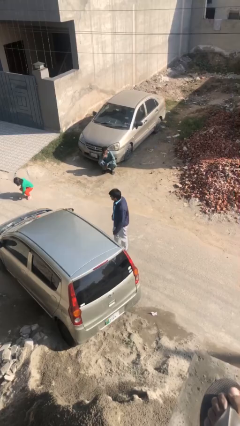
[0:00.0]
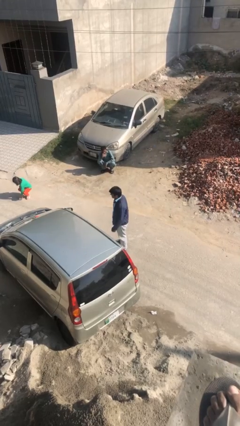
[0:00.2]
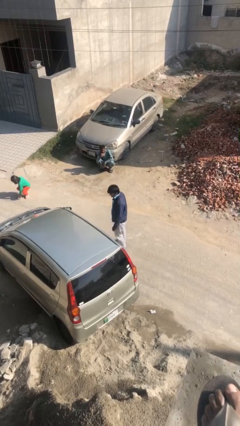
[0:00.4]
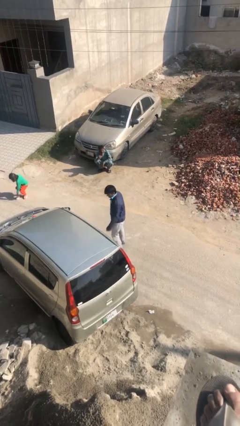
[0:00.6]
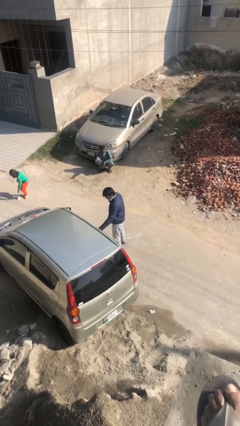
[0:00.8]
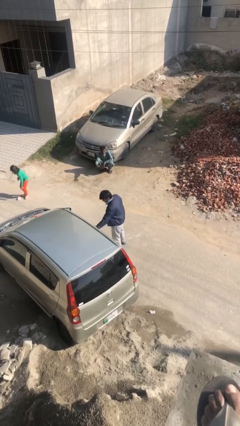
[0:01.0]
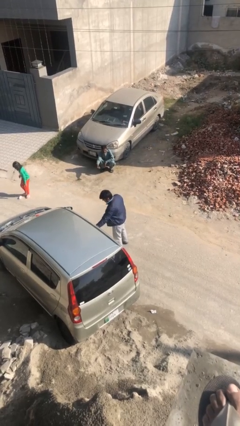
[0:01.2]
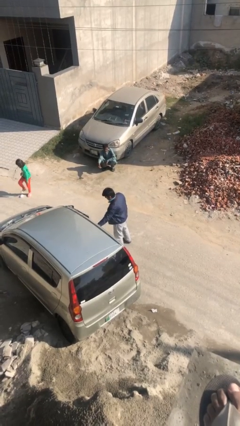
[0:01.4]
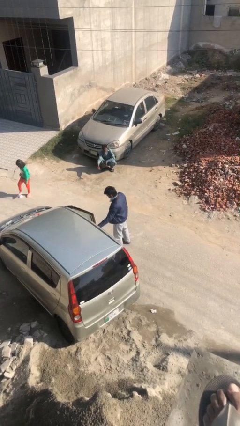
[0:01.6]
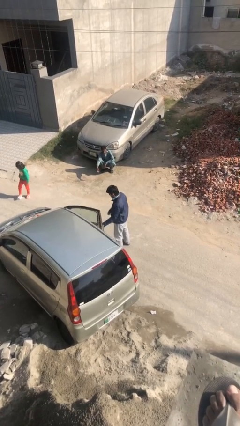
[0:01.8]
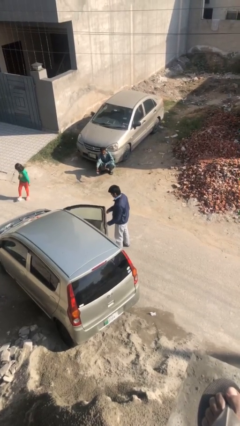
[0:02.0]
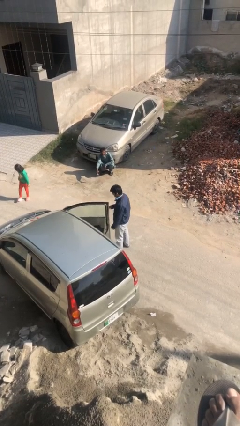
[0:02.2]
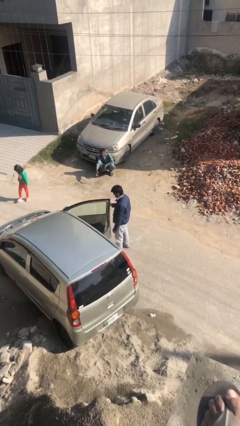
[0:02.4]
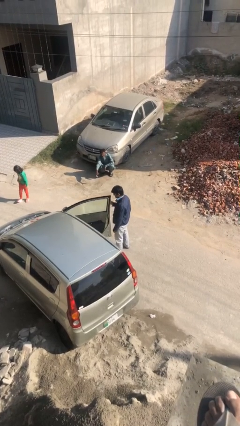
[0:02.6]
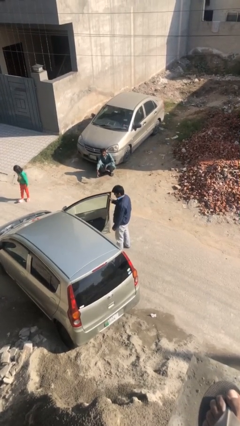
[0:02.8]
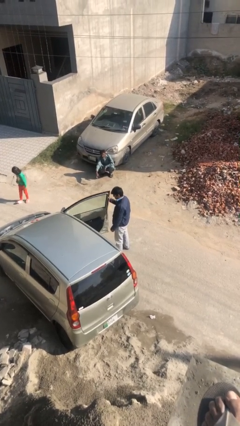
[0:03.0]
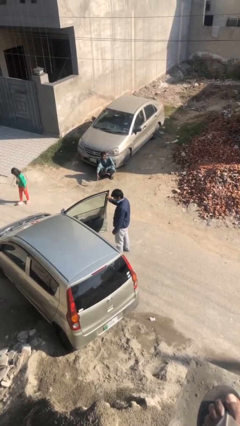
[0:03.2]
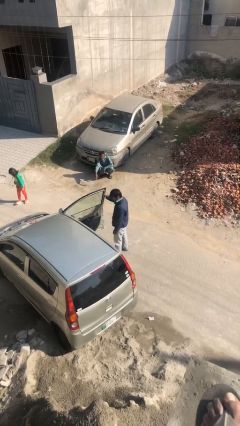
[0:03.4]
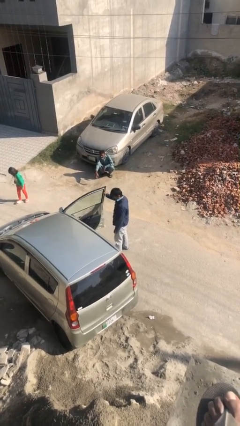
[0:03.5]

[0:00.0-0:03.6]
person opens car door

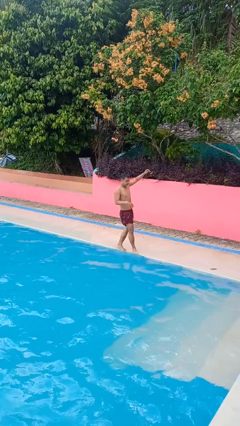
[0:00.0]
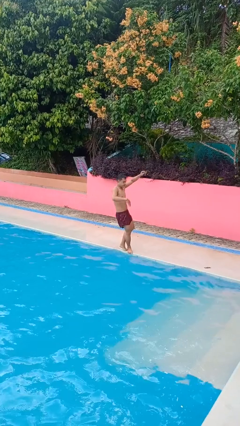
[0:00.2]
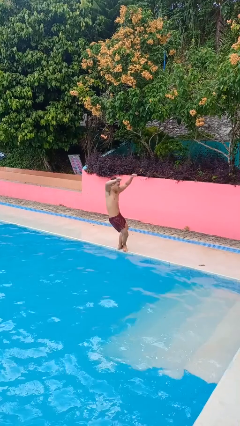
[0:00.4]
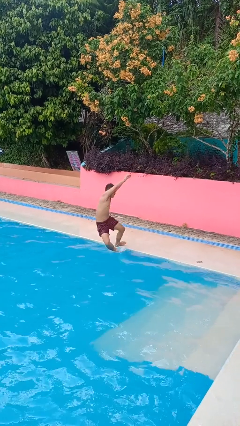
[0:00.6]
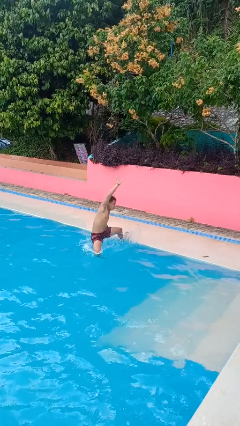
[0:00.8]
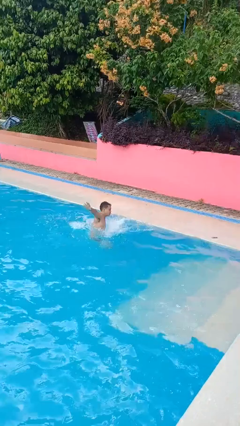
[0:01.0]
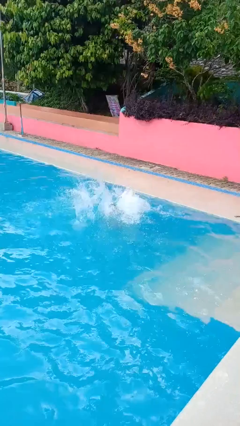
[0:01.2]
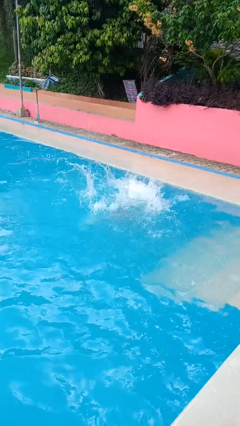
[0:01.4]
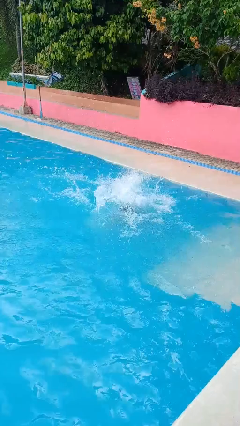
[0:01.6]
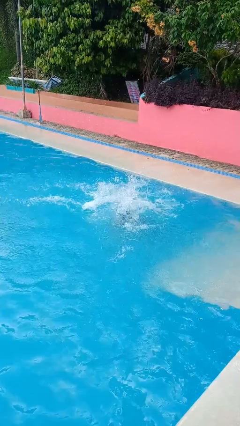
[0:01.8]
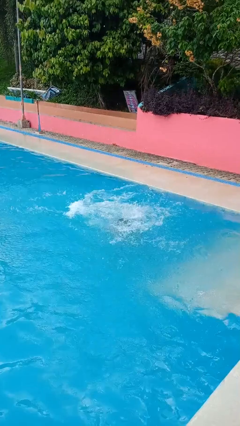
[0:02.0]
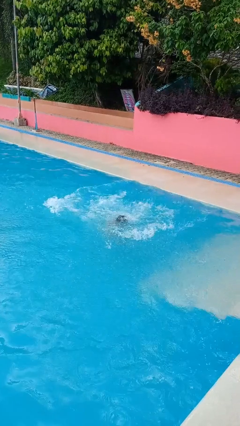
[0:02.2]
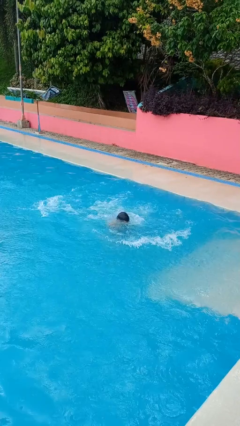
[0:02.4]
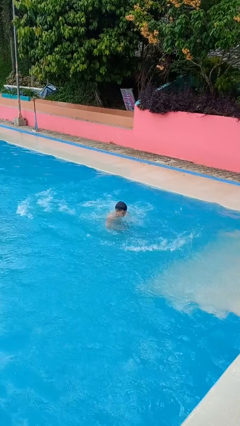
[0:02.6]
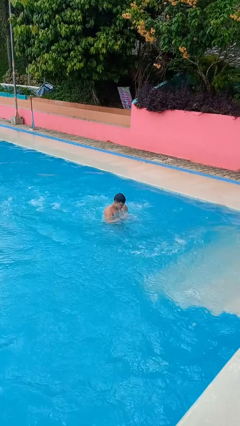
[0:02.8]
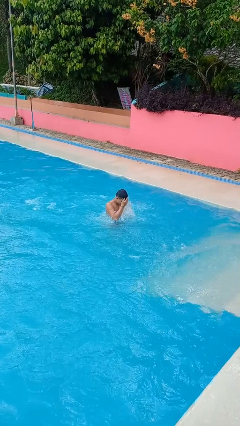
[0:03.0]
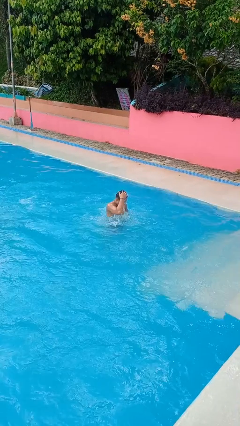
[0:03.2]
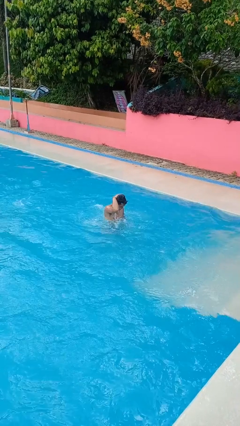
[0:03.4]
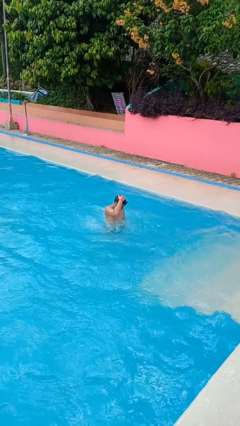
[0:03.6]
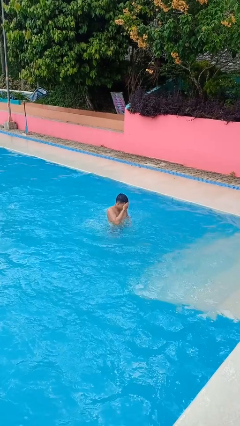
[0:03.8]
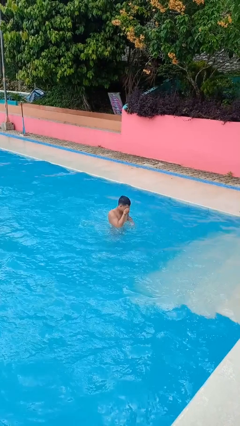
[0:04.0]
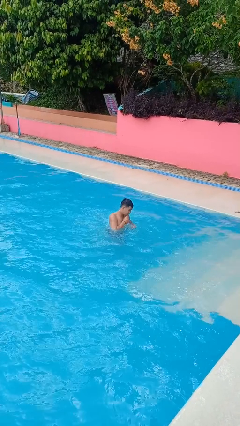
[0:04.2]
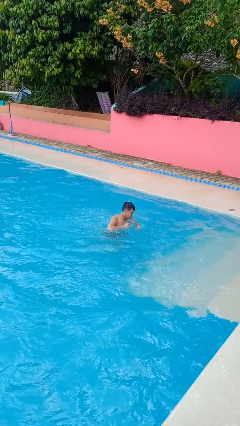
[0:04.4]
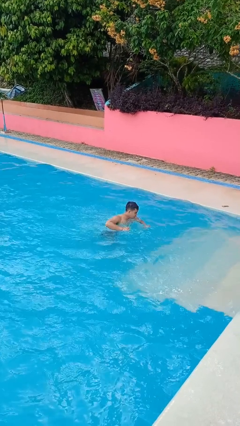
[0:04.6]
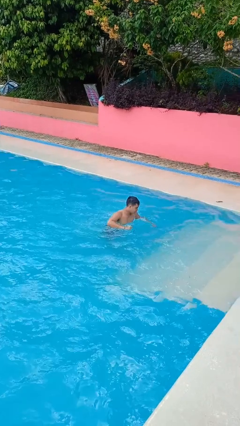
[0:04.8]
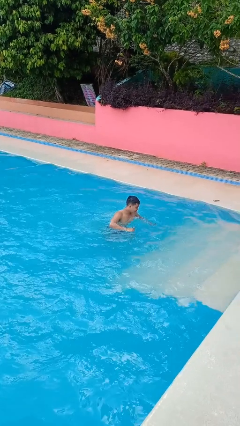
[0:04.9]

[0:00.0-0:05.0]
person falls into pool

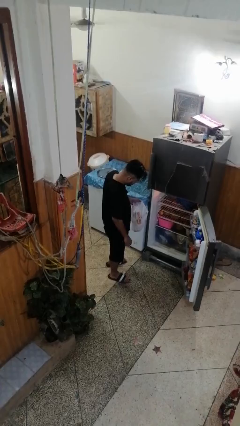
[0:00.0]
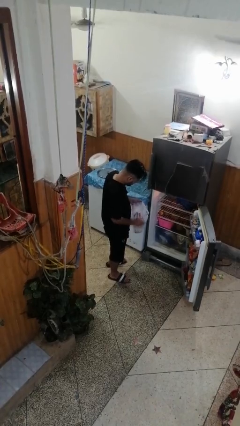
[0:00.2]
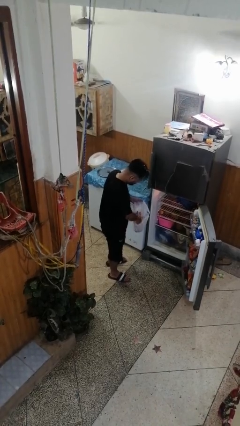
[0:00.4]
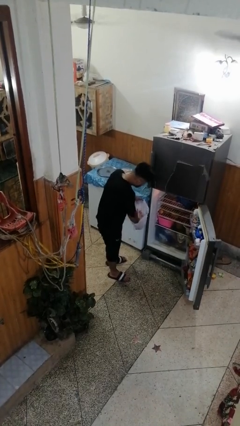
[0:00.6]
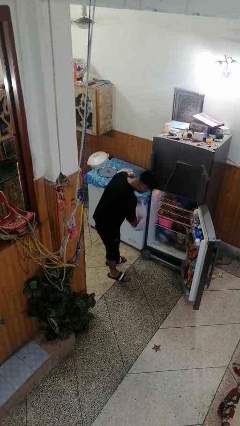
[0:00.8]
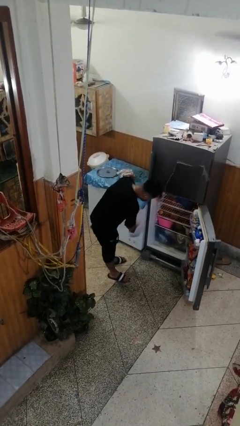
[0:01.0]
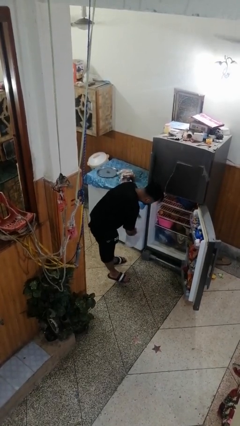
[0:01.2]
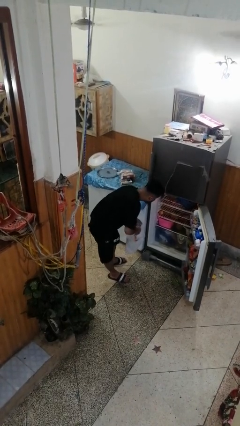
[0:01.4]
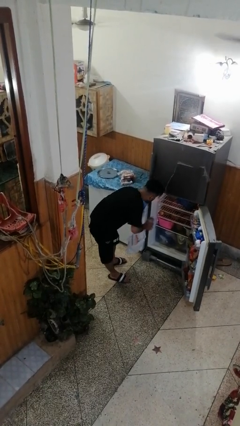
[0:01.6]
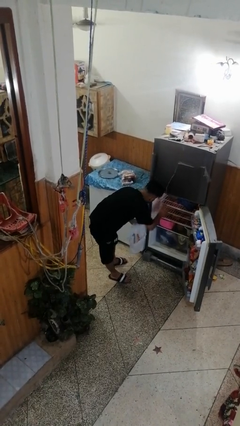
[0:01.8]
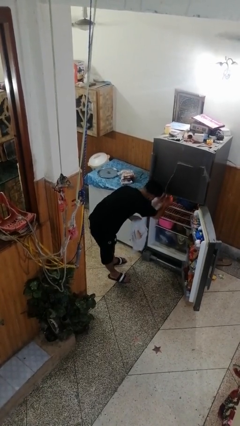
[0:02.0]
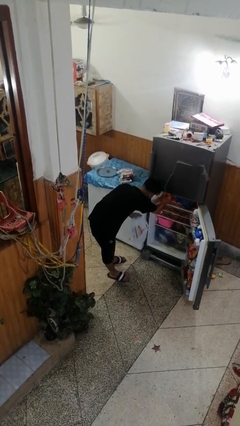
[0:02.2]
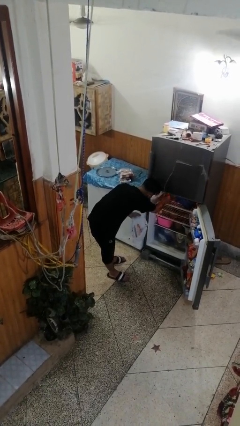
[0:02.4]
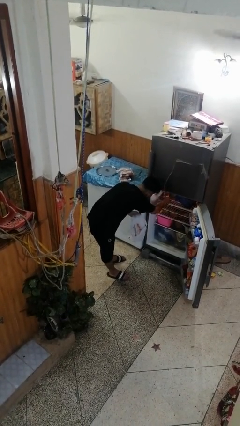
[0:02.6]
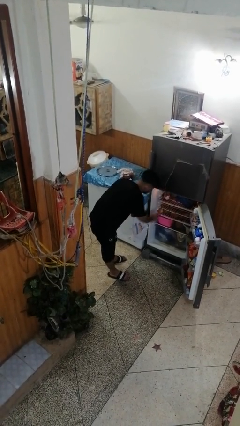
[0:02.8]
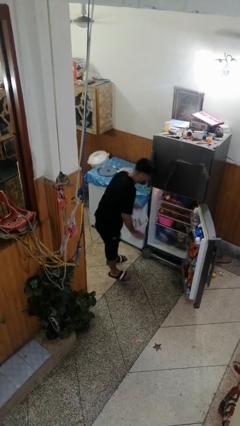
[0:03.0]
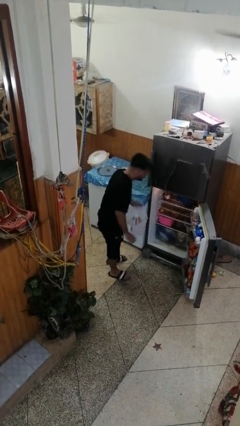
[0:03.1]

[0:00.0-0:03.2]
person loads groceries into refrigerator

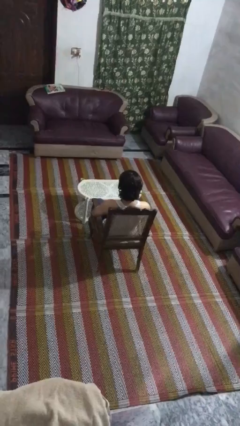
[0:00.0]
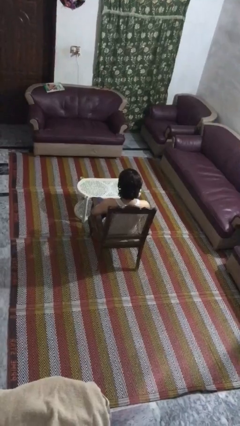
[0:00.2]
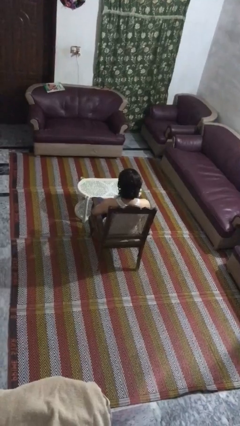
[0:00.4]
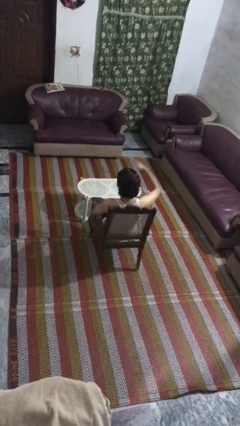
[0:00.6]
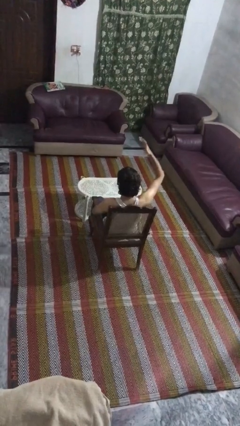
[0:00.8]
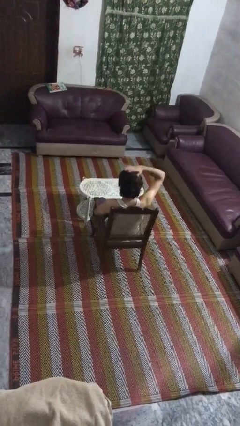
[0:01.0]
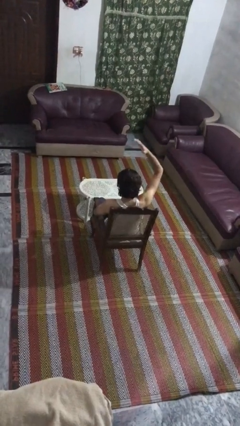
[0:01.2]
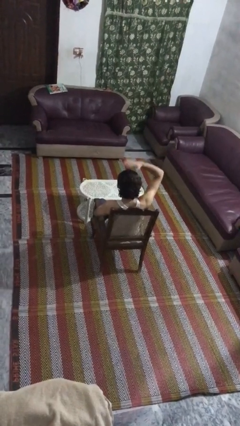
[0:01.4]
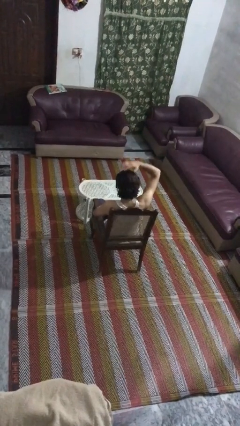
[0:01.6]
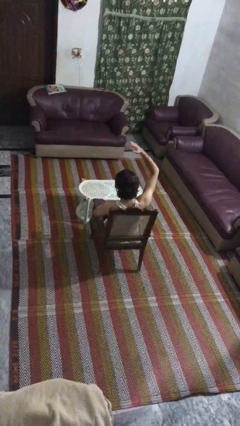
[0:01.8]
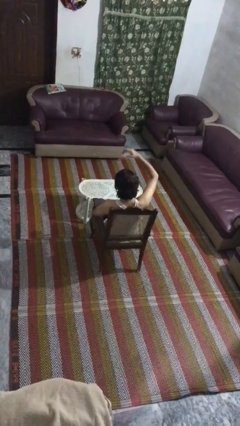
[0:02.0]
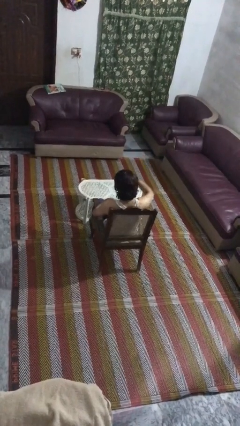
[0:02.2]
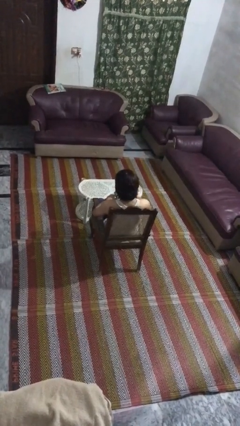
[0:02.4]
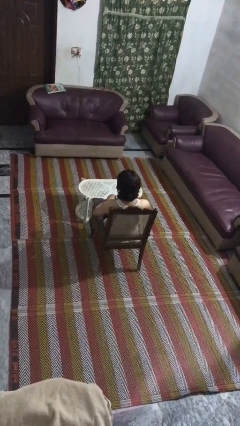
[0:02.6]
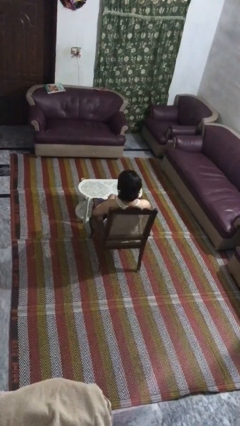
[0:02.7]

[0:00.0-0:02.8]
person pats head

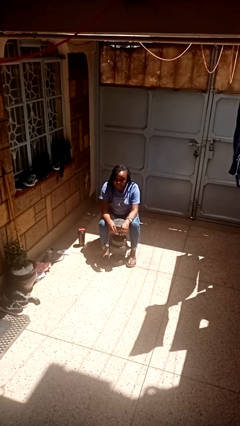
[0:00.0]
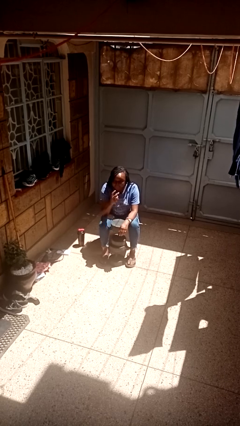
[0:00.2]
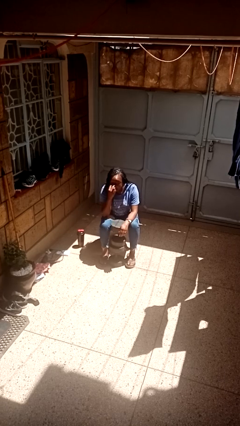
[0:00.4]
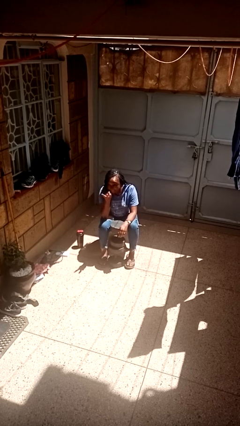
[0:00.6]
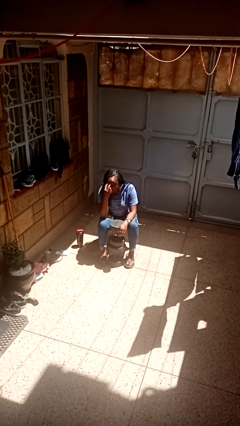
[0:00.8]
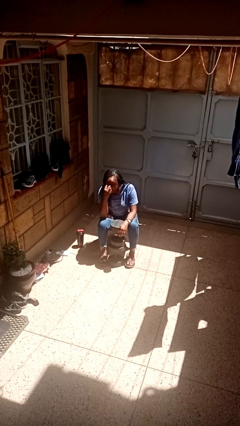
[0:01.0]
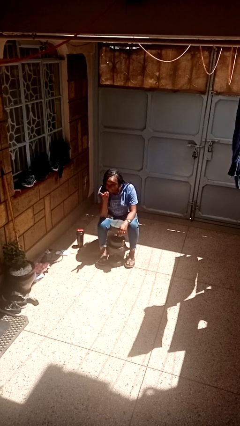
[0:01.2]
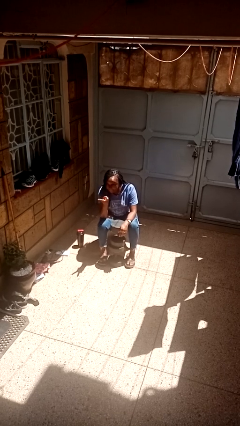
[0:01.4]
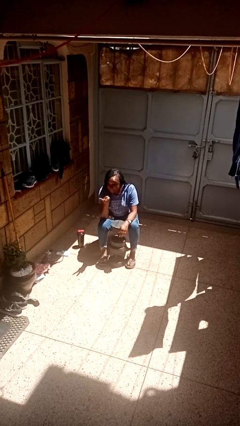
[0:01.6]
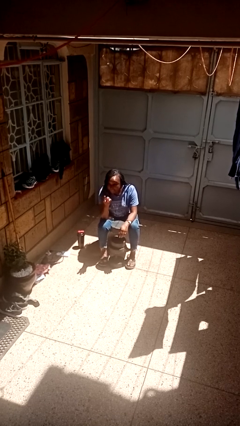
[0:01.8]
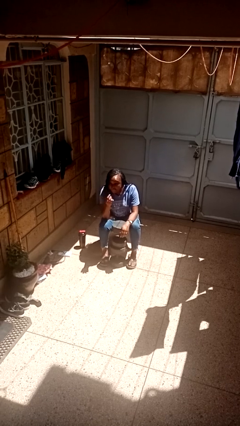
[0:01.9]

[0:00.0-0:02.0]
person gestures watch closely

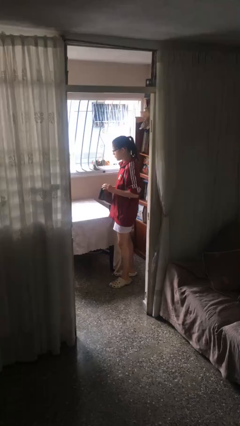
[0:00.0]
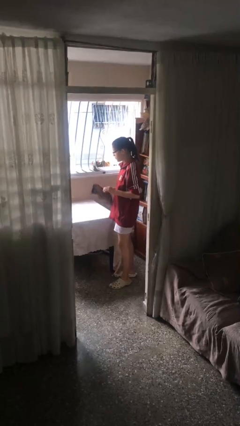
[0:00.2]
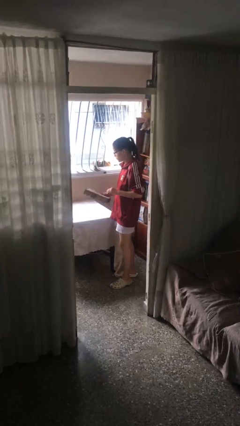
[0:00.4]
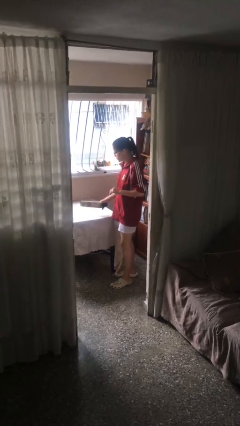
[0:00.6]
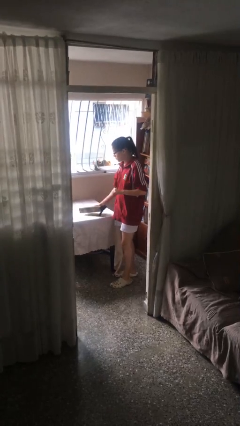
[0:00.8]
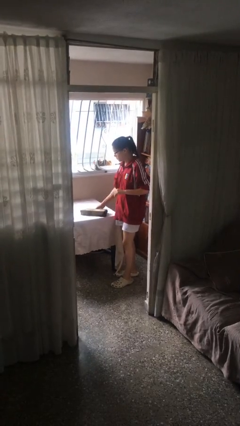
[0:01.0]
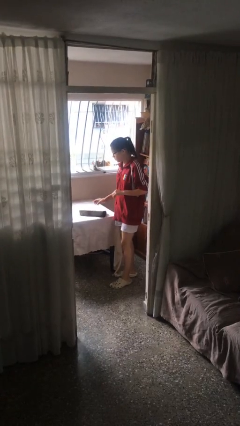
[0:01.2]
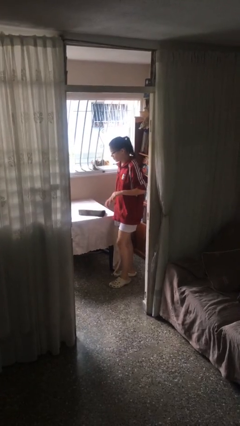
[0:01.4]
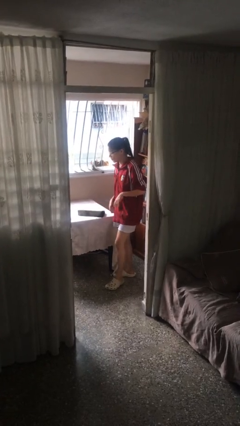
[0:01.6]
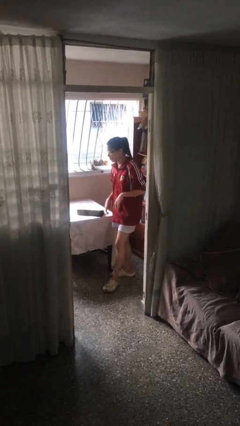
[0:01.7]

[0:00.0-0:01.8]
person puts down object on table
